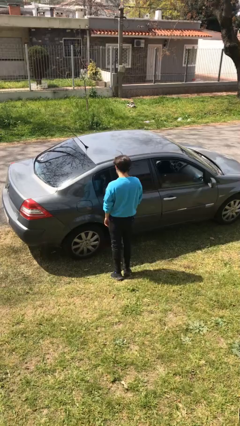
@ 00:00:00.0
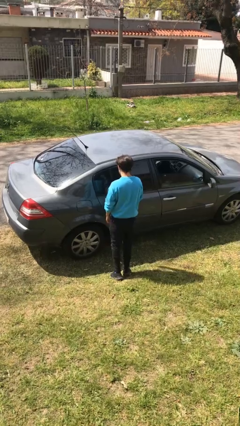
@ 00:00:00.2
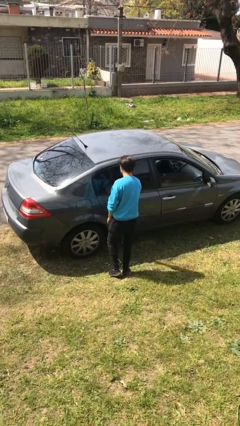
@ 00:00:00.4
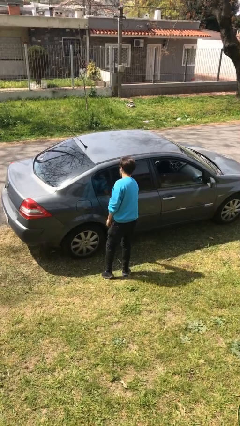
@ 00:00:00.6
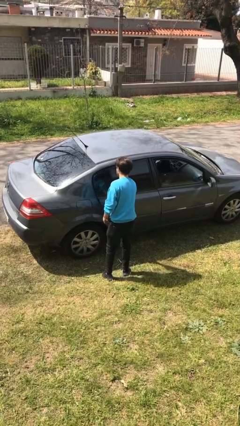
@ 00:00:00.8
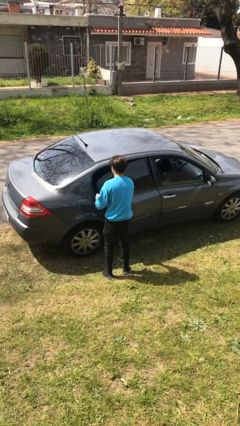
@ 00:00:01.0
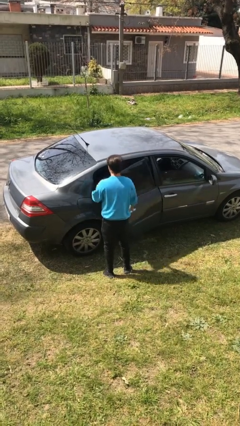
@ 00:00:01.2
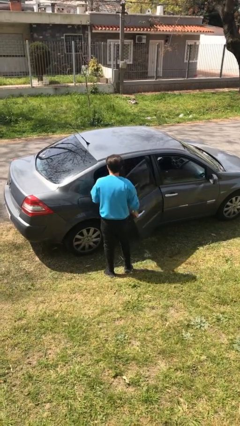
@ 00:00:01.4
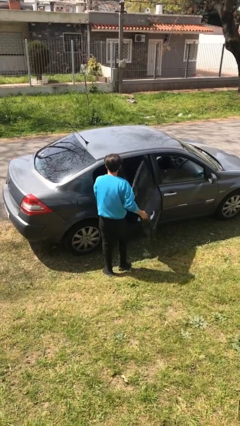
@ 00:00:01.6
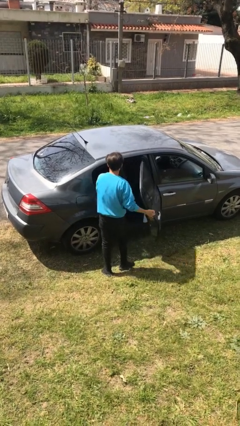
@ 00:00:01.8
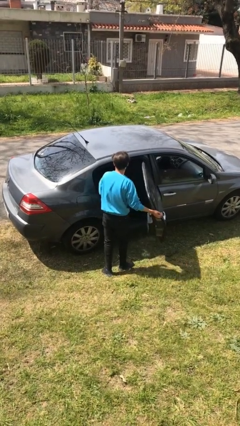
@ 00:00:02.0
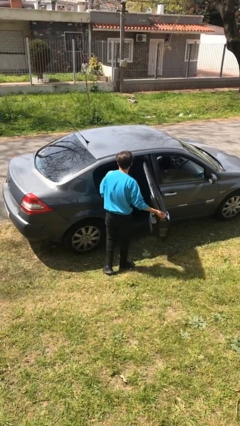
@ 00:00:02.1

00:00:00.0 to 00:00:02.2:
person opens car door

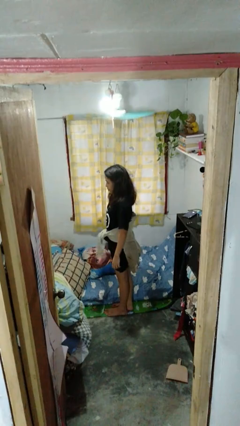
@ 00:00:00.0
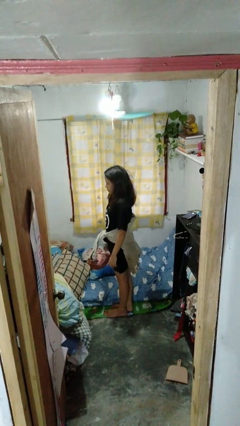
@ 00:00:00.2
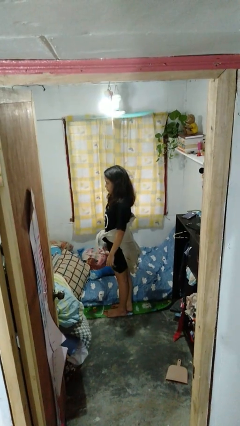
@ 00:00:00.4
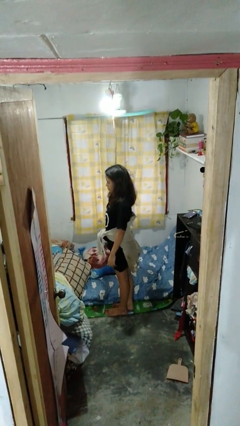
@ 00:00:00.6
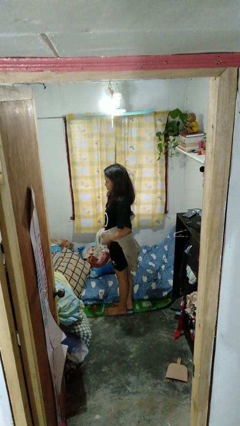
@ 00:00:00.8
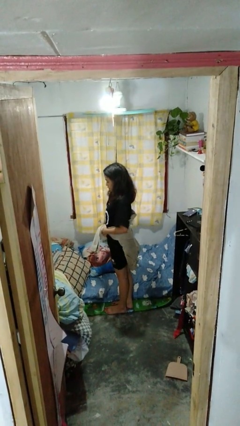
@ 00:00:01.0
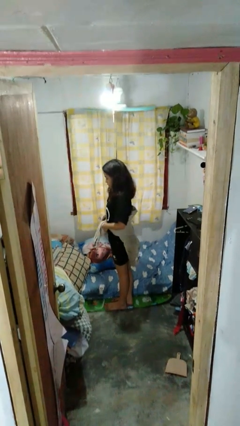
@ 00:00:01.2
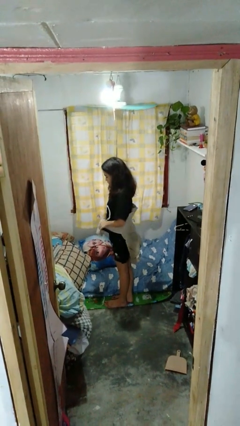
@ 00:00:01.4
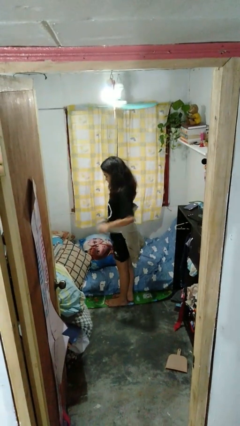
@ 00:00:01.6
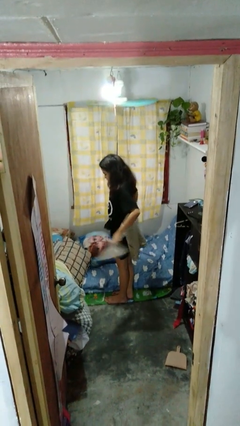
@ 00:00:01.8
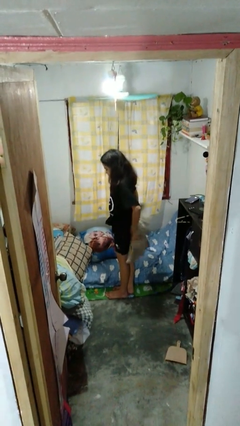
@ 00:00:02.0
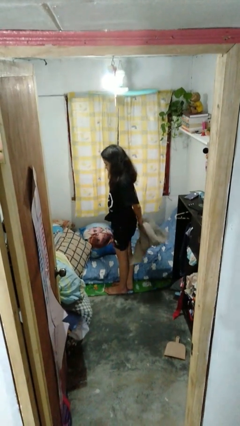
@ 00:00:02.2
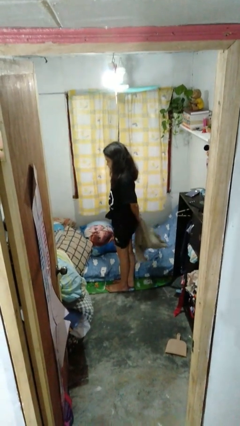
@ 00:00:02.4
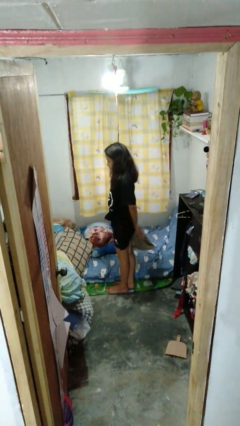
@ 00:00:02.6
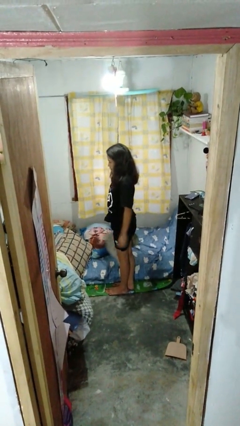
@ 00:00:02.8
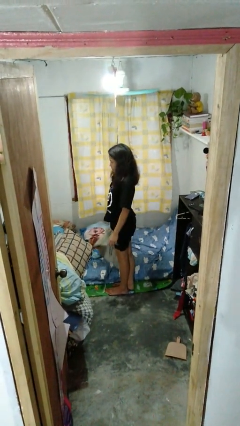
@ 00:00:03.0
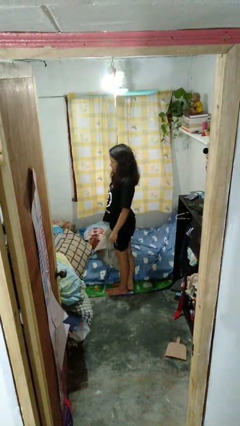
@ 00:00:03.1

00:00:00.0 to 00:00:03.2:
person unties jacket around waist

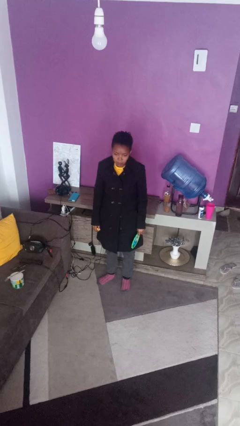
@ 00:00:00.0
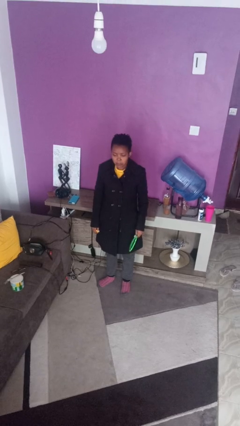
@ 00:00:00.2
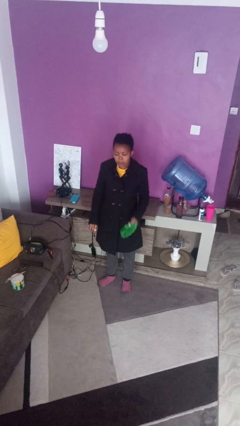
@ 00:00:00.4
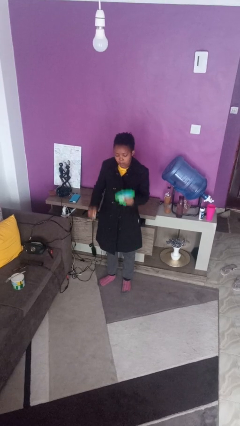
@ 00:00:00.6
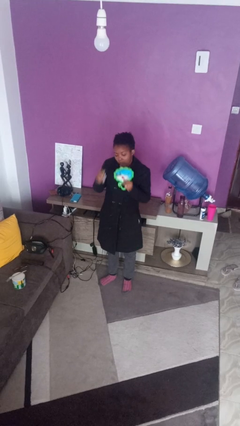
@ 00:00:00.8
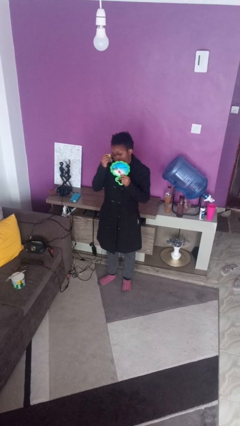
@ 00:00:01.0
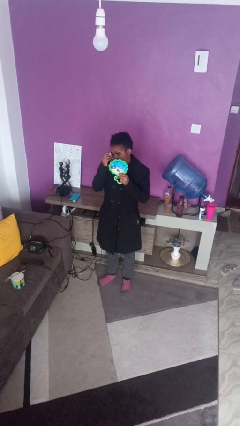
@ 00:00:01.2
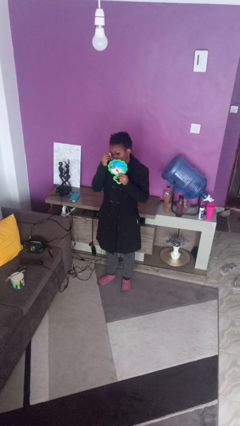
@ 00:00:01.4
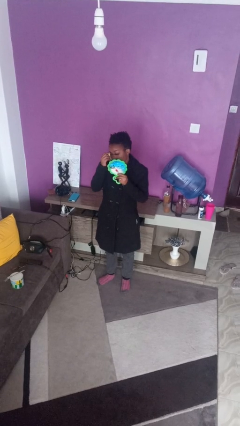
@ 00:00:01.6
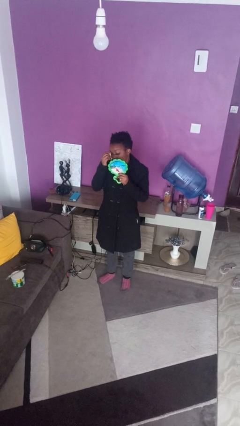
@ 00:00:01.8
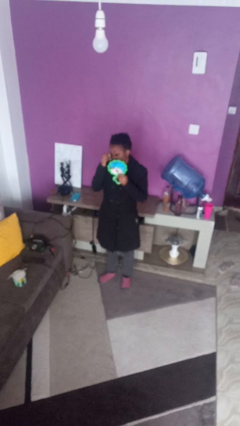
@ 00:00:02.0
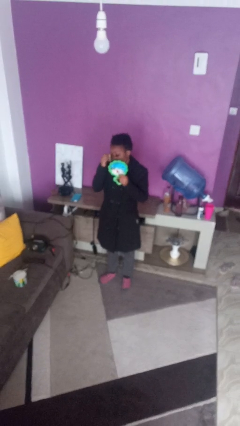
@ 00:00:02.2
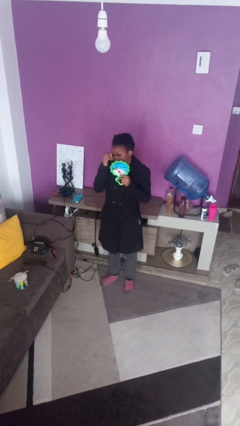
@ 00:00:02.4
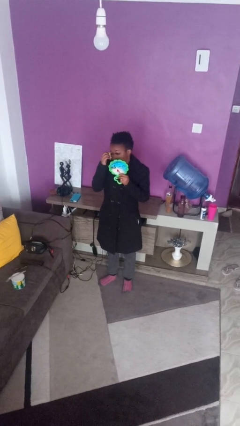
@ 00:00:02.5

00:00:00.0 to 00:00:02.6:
person applies eye makeup

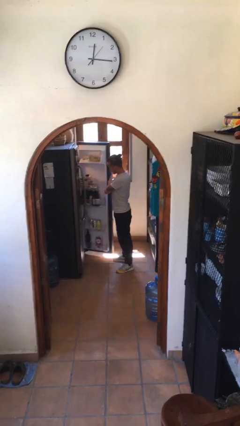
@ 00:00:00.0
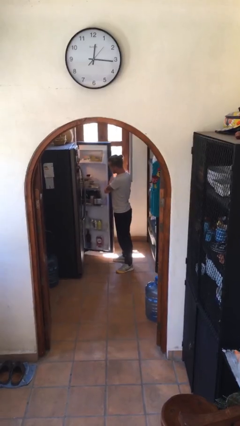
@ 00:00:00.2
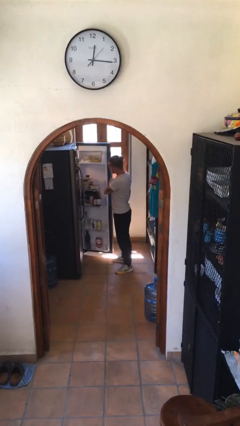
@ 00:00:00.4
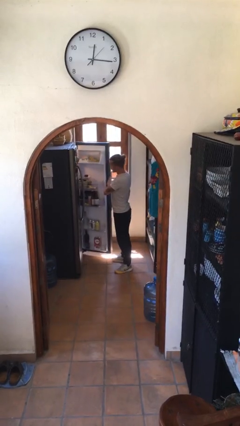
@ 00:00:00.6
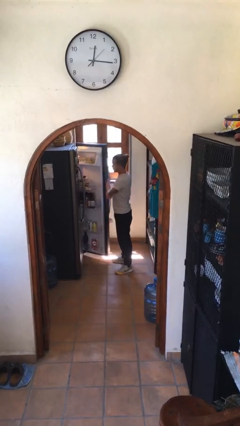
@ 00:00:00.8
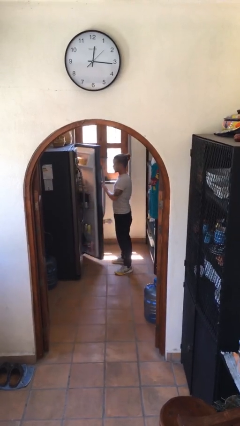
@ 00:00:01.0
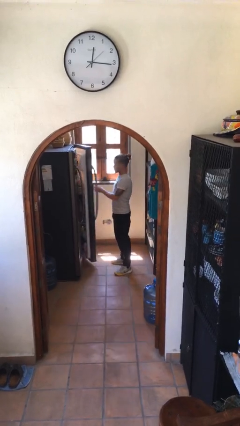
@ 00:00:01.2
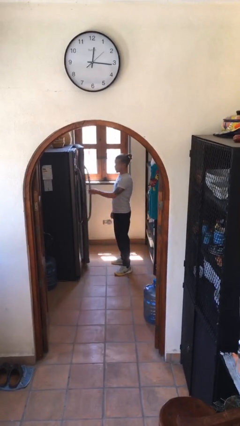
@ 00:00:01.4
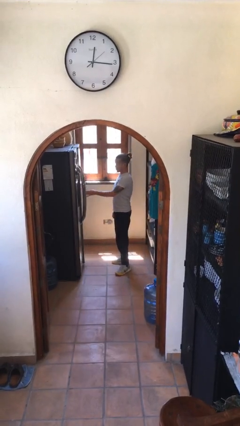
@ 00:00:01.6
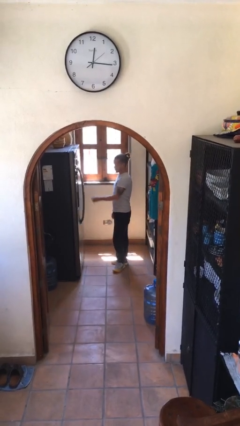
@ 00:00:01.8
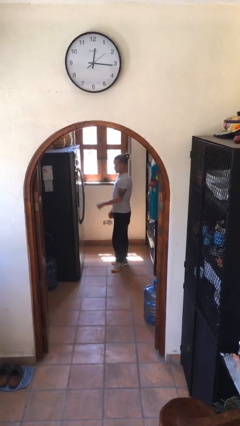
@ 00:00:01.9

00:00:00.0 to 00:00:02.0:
person closes refrigerator

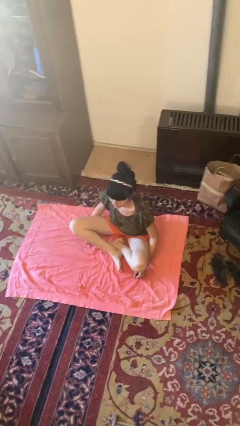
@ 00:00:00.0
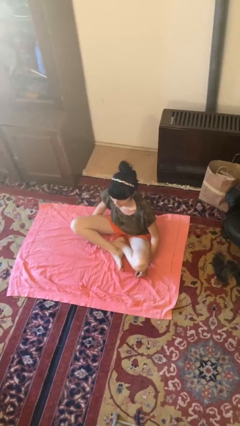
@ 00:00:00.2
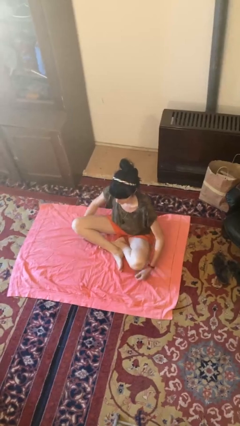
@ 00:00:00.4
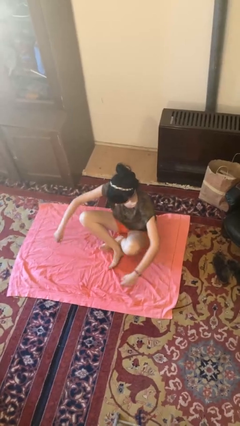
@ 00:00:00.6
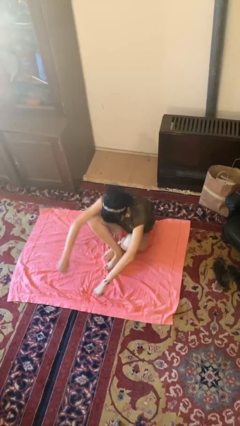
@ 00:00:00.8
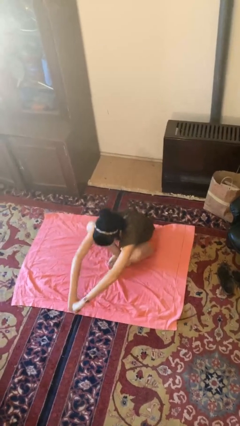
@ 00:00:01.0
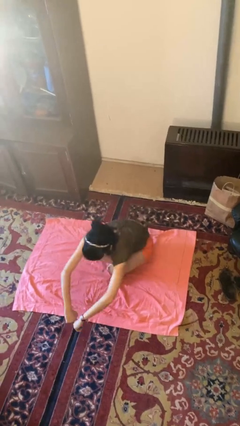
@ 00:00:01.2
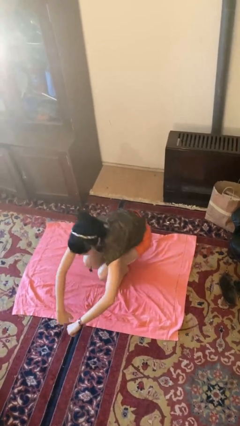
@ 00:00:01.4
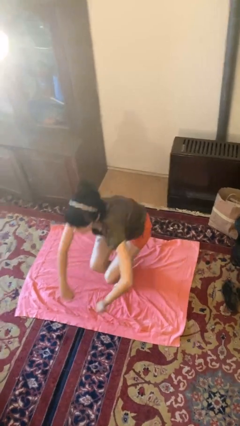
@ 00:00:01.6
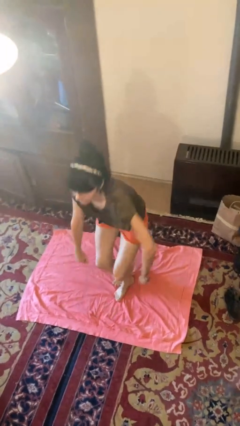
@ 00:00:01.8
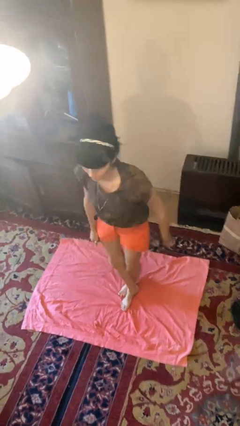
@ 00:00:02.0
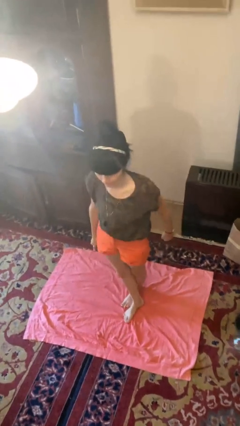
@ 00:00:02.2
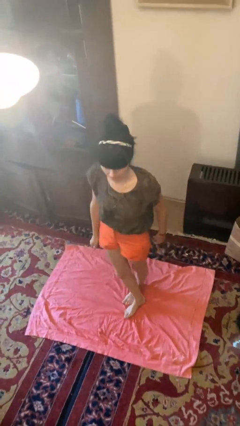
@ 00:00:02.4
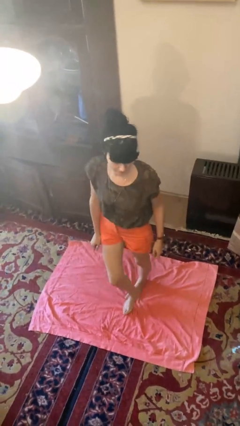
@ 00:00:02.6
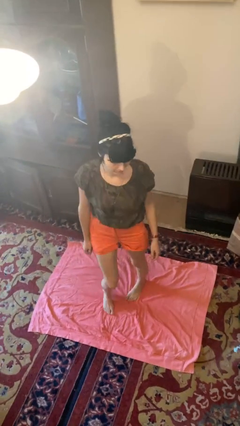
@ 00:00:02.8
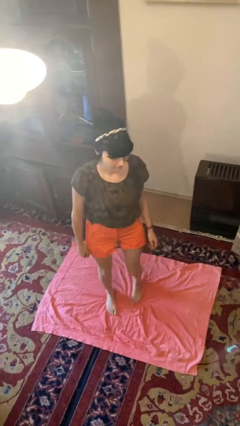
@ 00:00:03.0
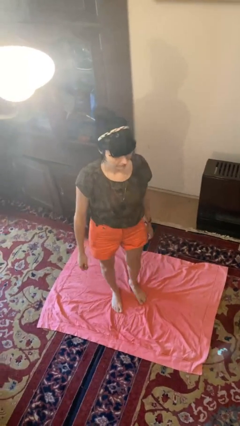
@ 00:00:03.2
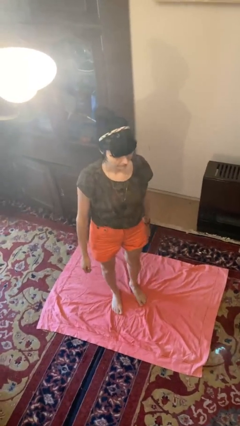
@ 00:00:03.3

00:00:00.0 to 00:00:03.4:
person stands up from floor

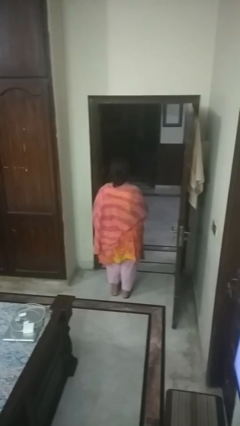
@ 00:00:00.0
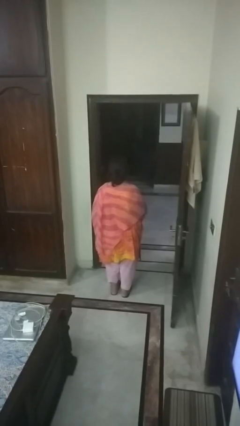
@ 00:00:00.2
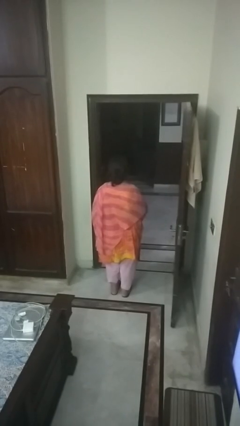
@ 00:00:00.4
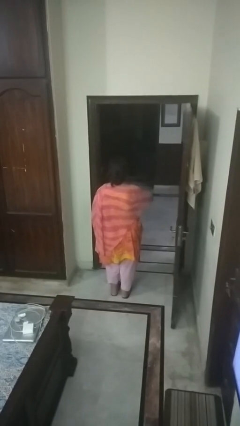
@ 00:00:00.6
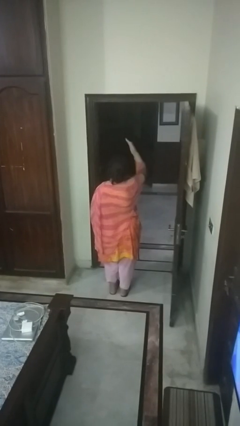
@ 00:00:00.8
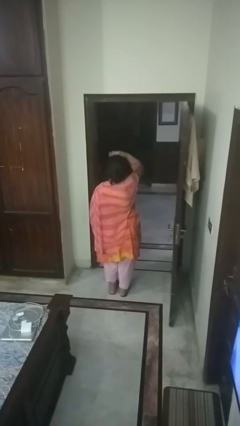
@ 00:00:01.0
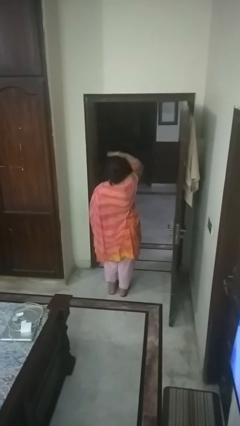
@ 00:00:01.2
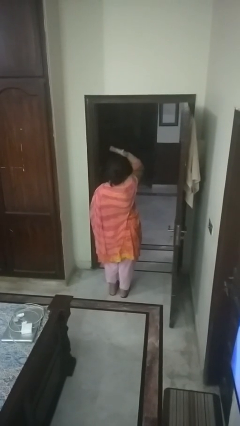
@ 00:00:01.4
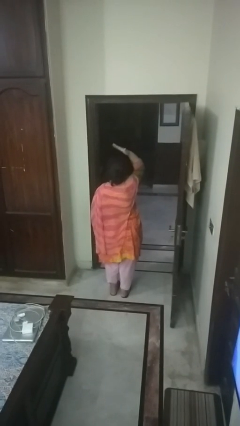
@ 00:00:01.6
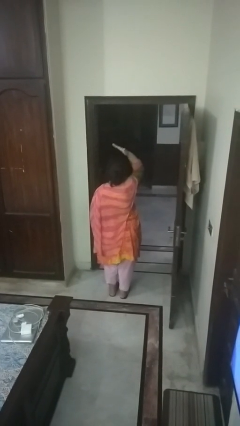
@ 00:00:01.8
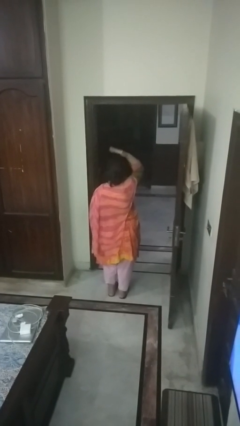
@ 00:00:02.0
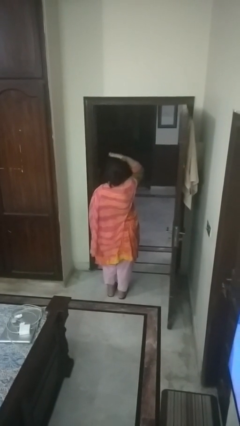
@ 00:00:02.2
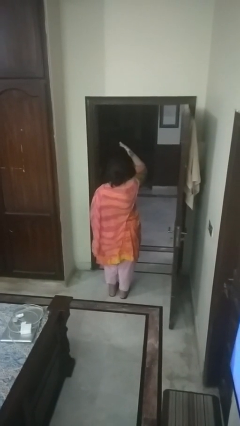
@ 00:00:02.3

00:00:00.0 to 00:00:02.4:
person pats head

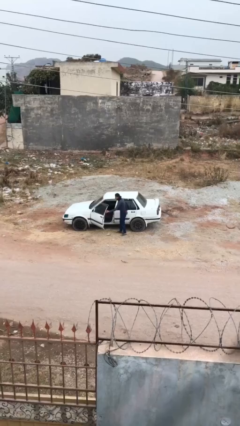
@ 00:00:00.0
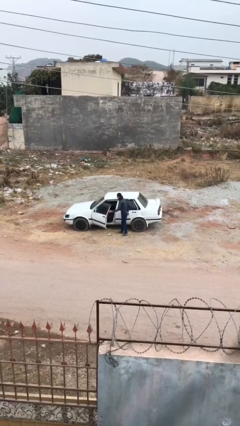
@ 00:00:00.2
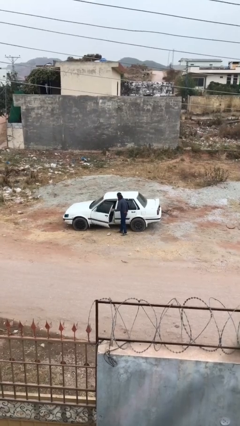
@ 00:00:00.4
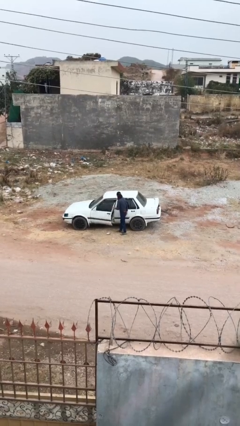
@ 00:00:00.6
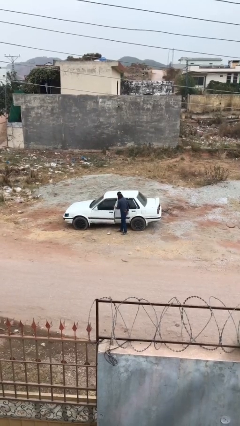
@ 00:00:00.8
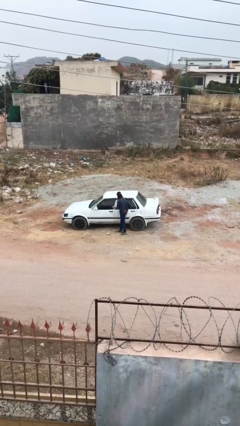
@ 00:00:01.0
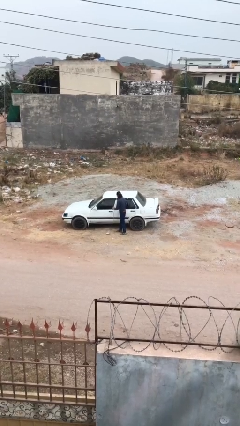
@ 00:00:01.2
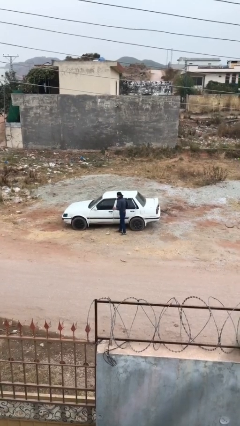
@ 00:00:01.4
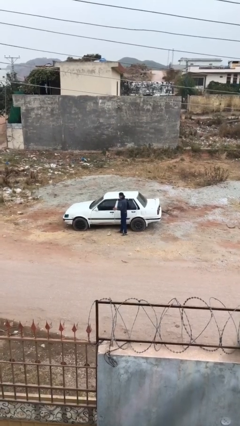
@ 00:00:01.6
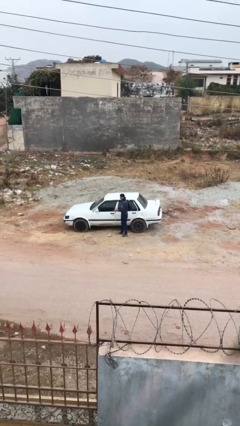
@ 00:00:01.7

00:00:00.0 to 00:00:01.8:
person closes car door
